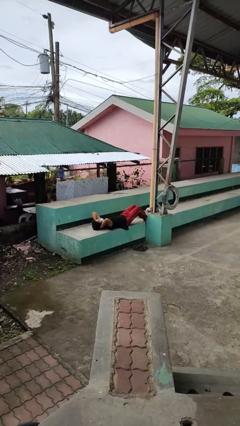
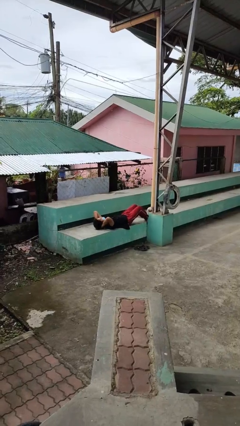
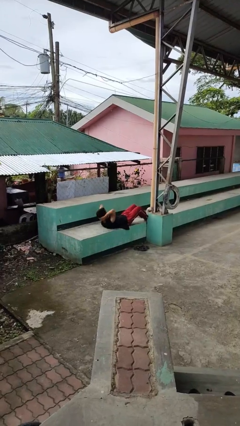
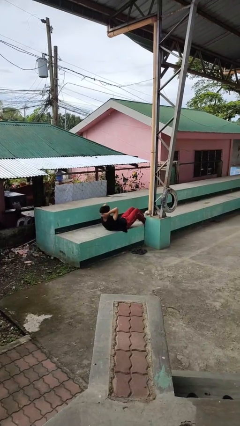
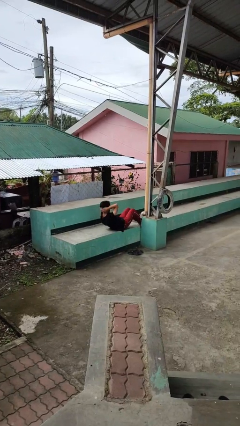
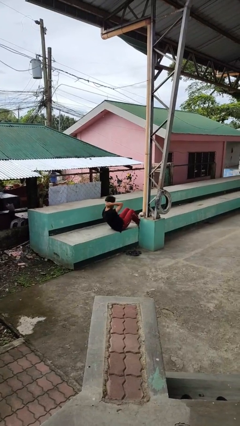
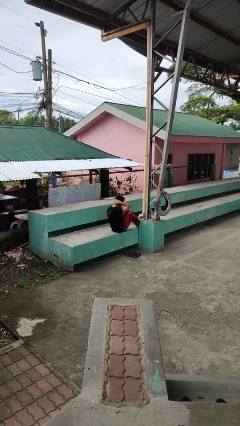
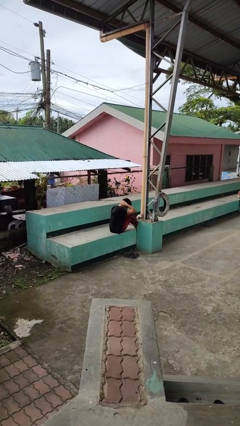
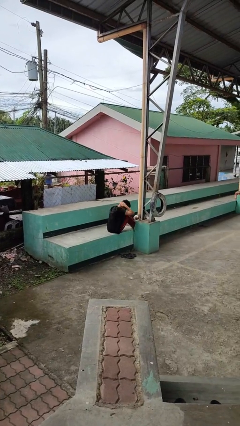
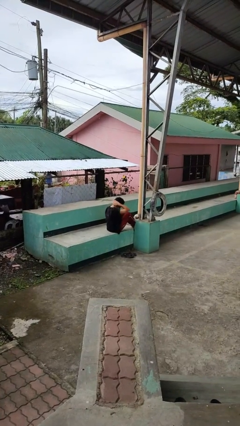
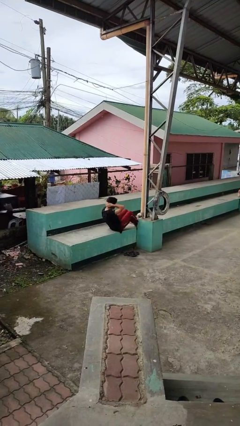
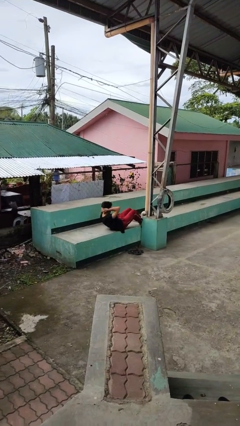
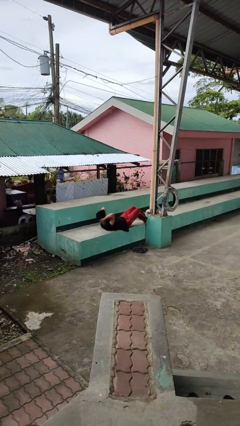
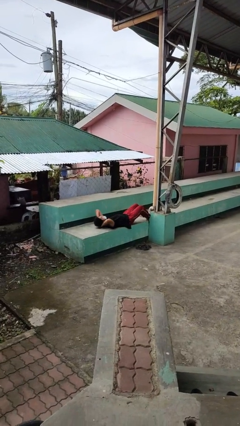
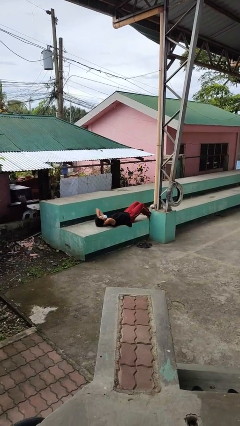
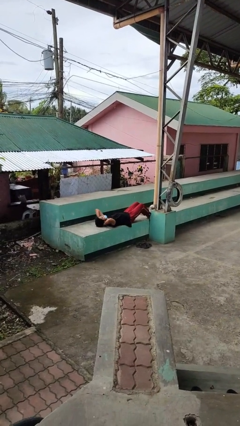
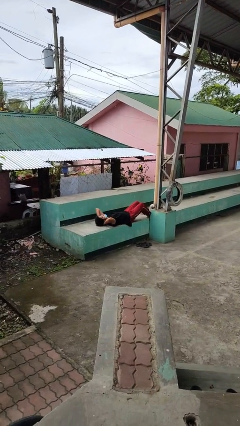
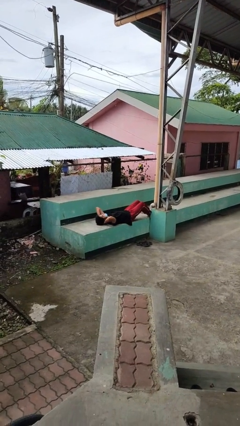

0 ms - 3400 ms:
person exercises with situp

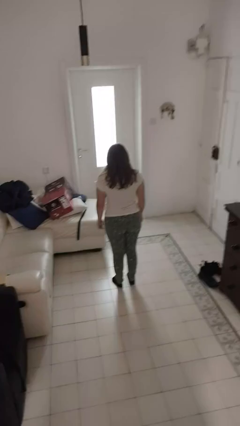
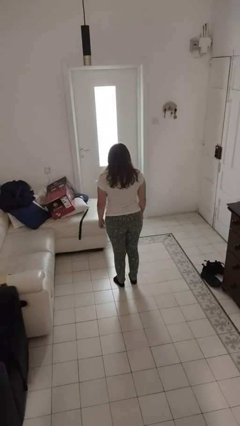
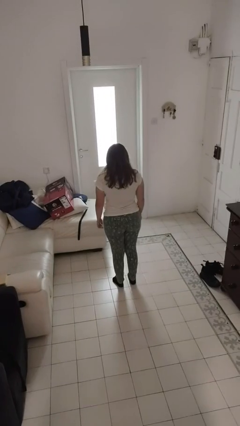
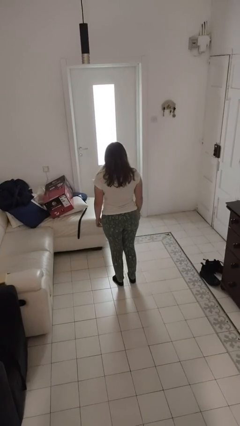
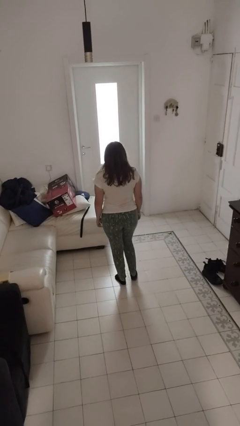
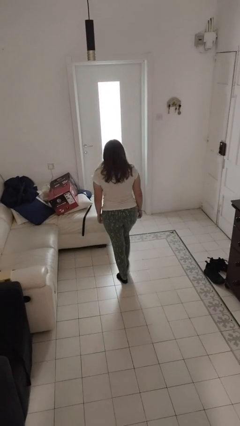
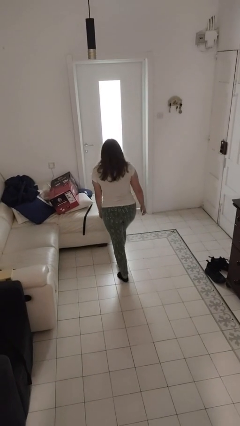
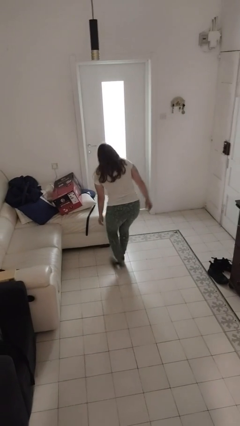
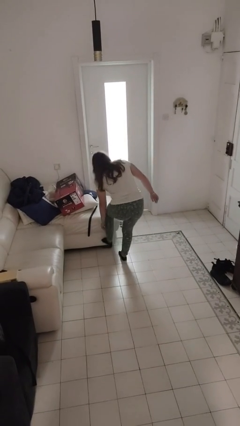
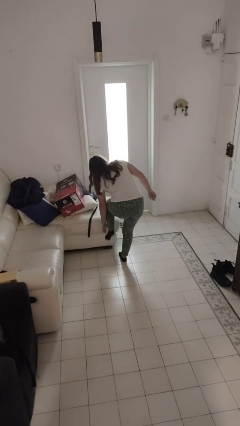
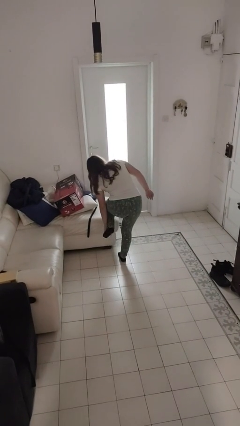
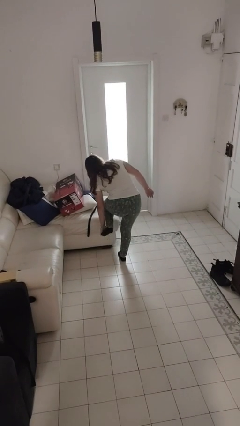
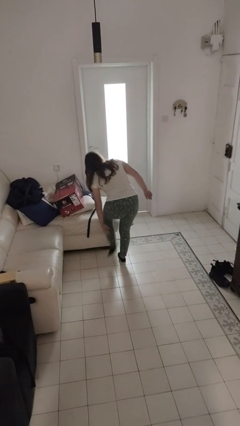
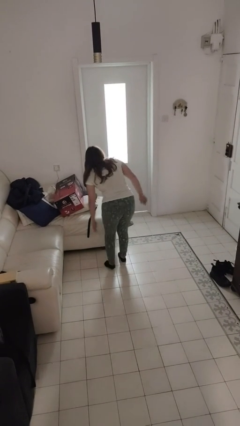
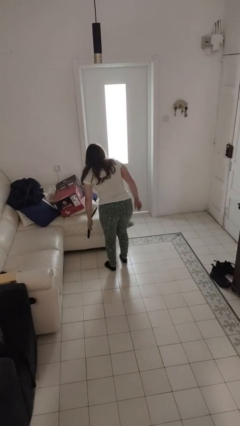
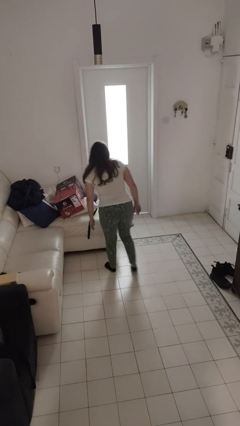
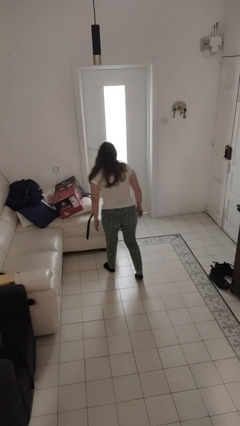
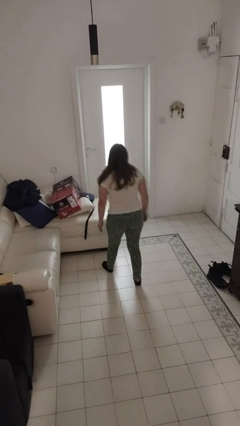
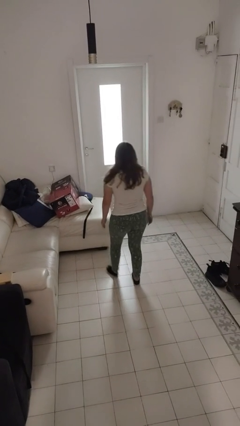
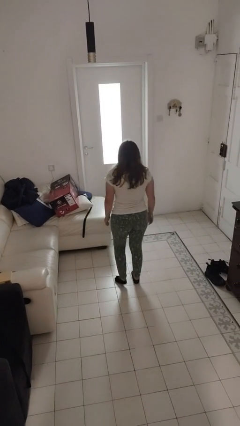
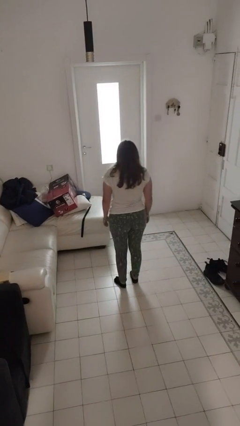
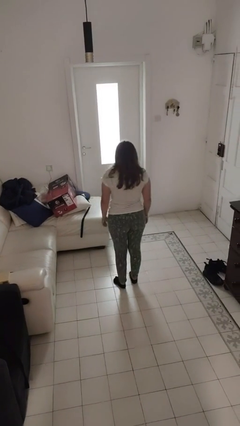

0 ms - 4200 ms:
person stubs toe

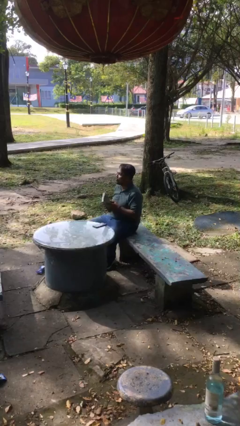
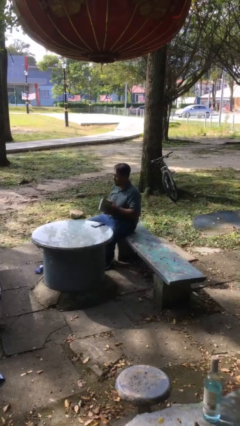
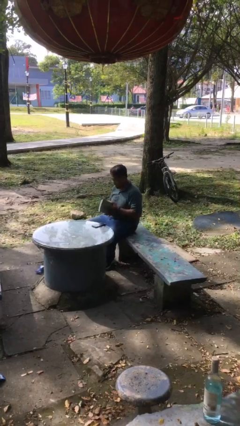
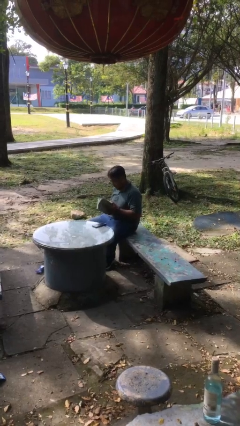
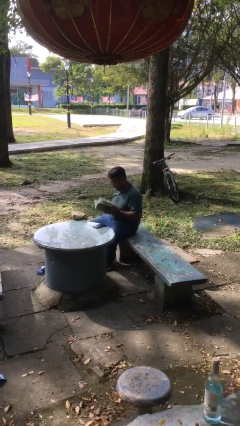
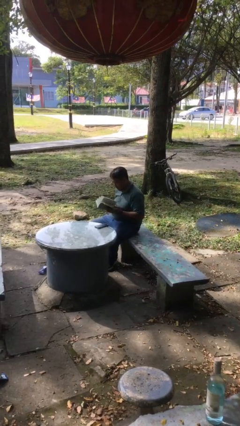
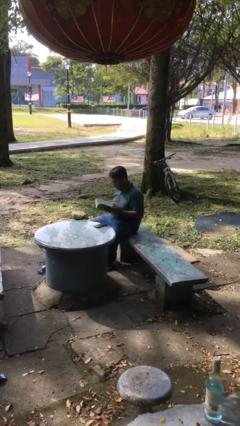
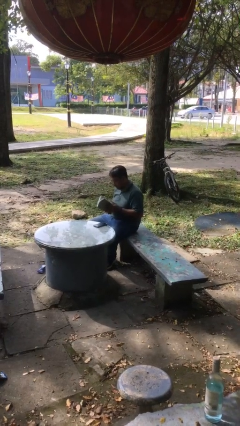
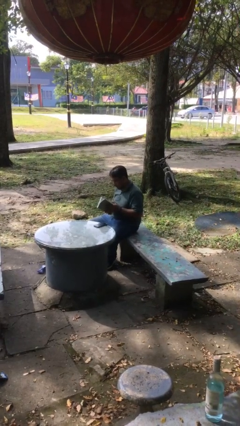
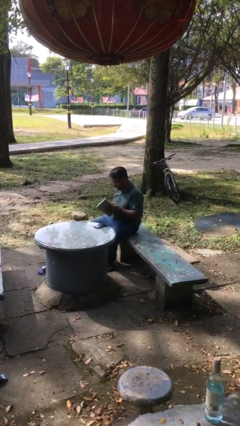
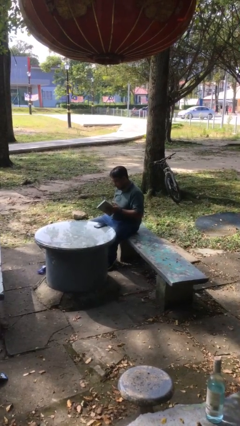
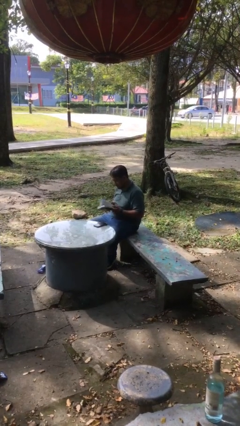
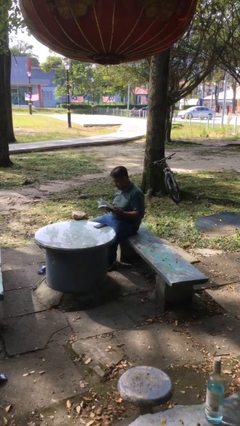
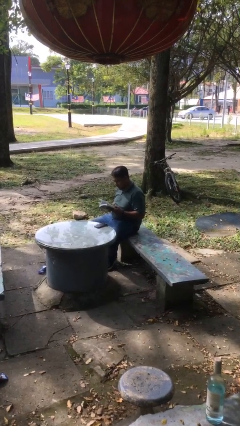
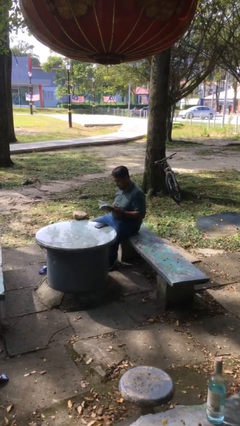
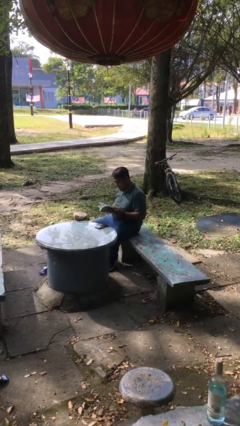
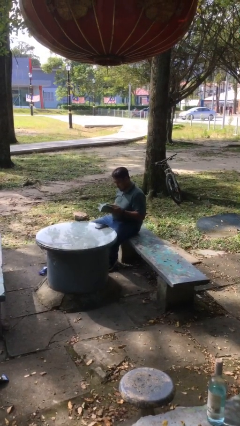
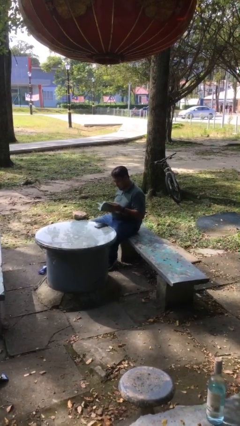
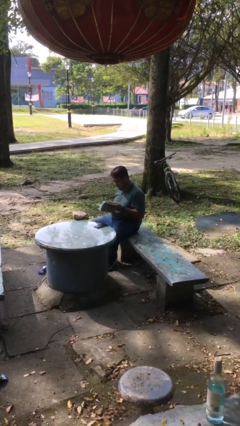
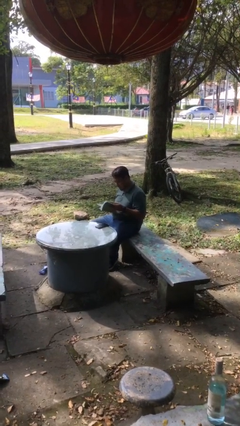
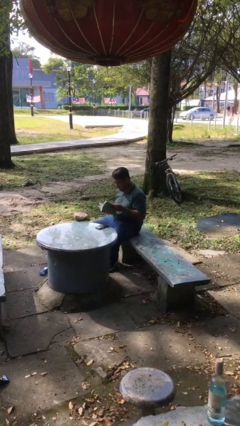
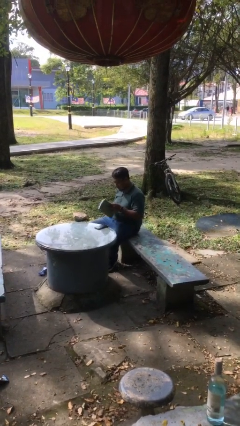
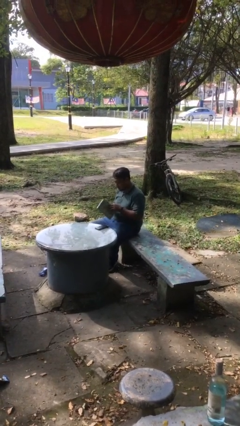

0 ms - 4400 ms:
person reads document

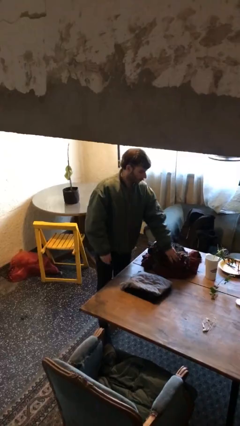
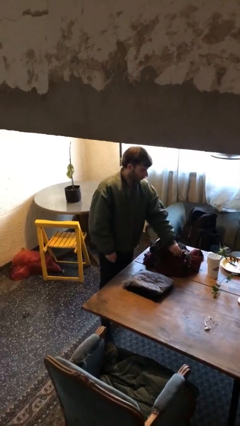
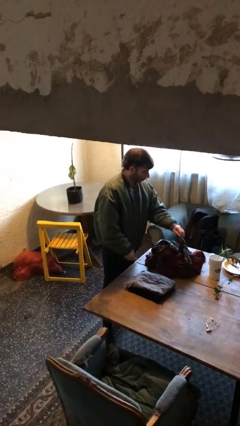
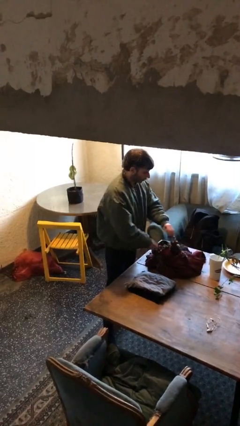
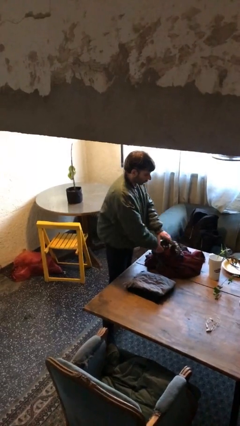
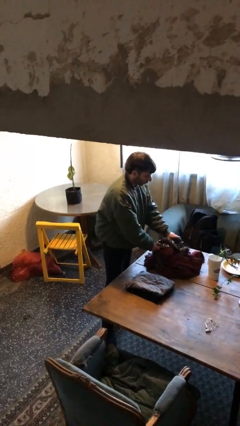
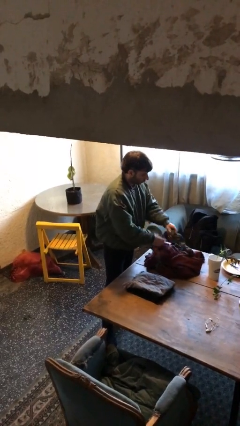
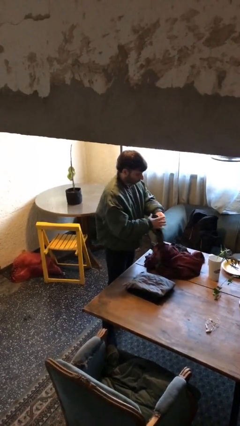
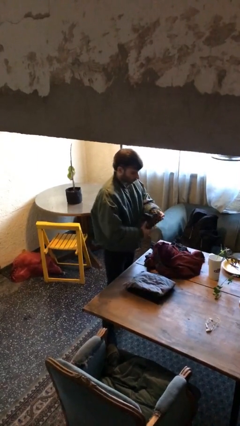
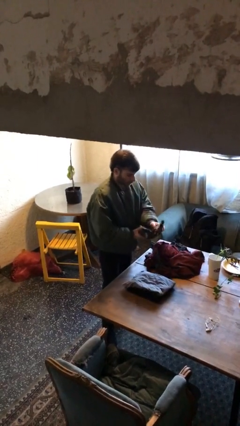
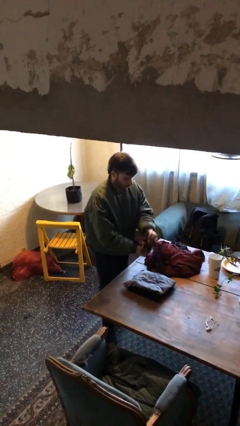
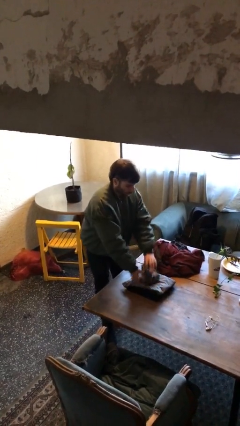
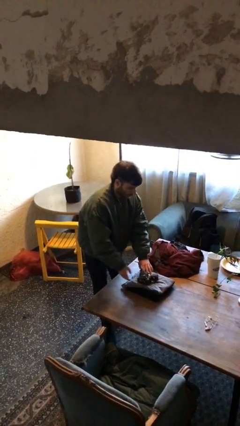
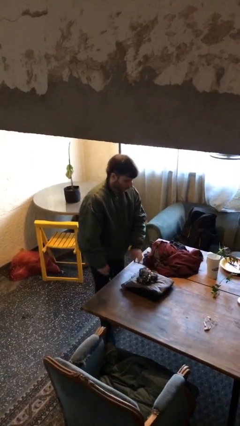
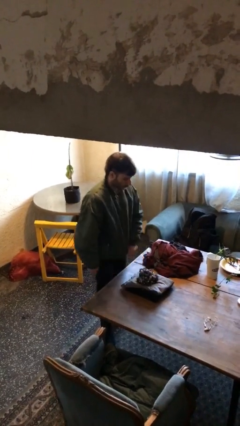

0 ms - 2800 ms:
person folds socks

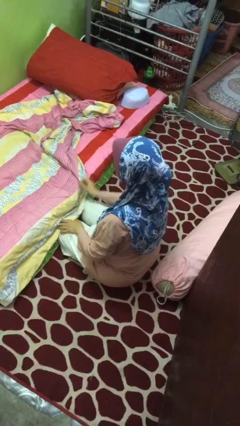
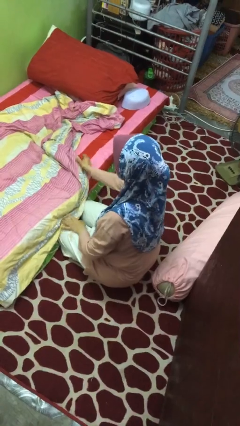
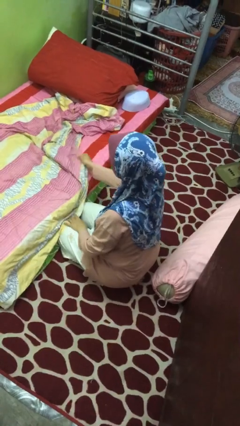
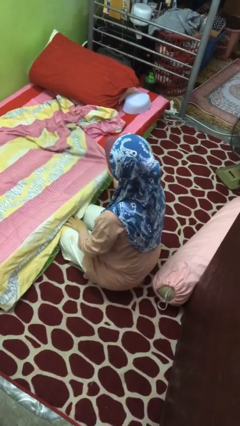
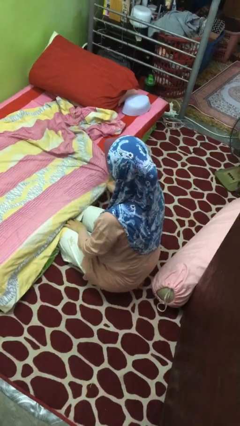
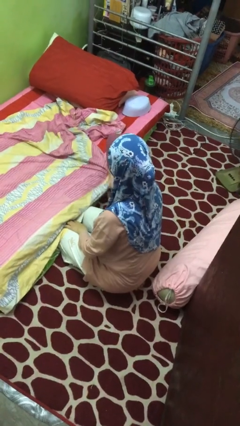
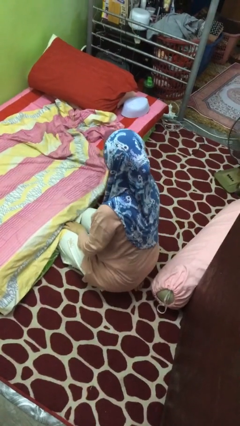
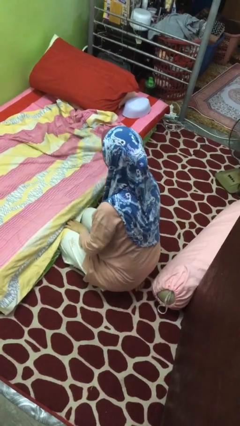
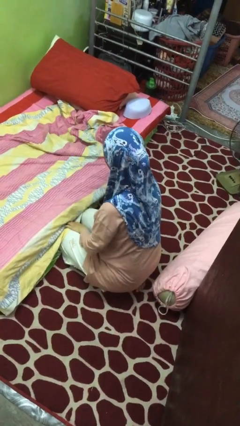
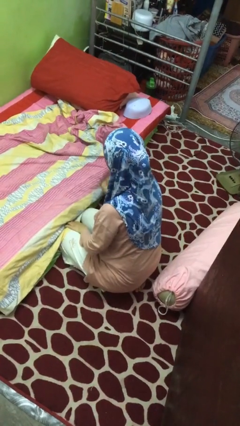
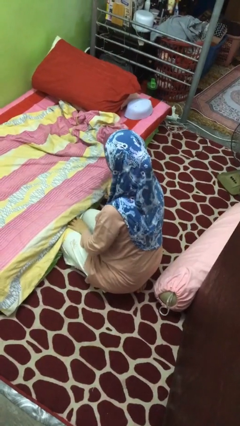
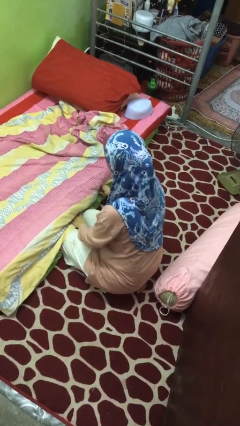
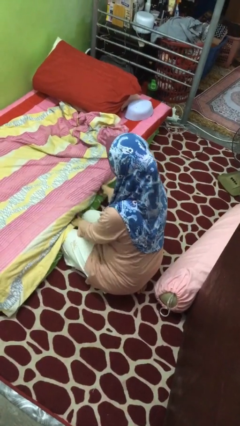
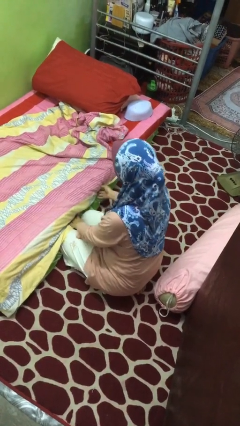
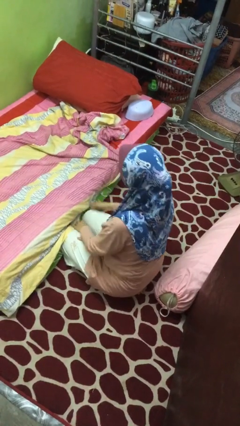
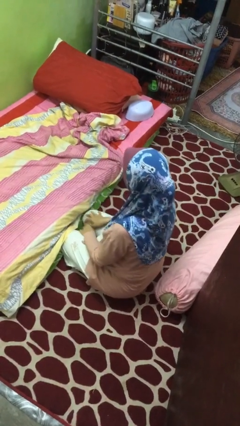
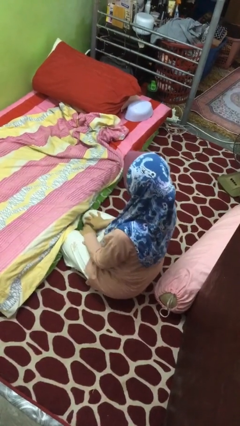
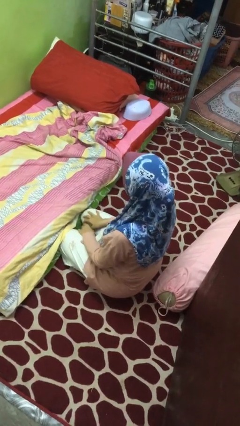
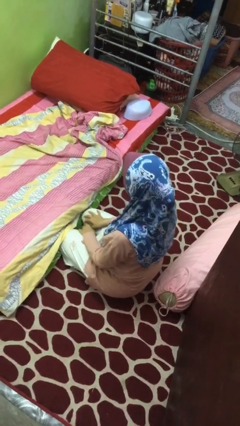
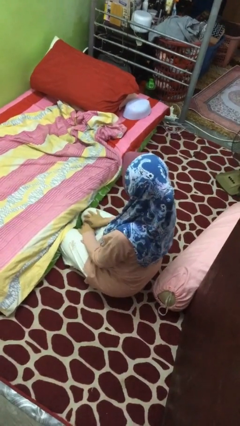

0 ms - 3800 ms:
person makes bed
